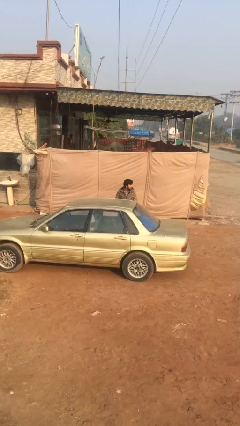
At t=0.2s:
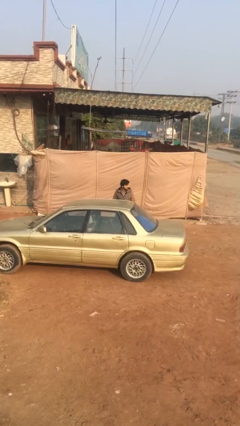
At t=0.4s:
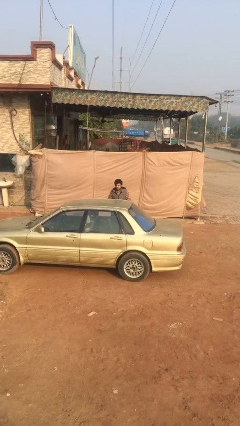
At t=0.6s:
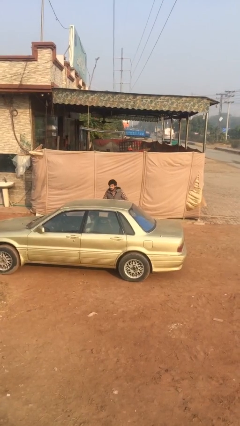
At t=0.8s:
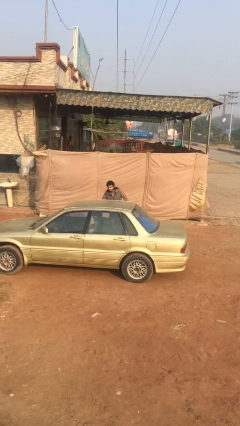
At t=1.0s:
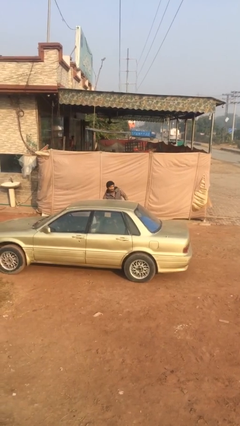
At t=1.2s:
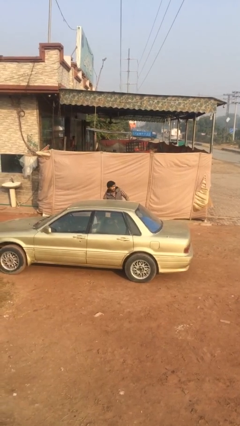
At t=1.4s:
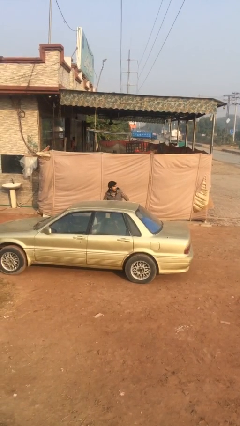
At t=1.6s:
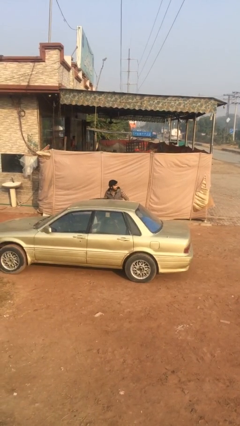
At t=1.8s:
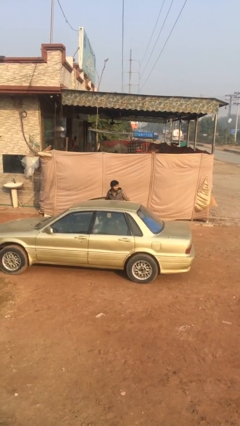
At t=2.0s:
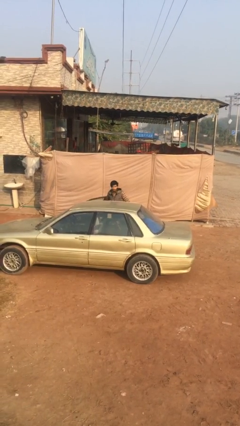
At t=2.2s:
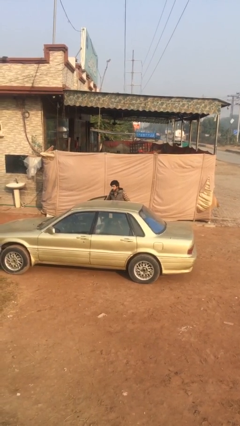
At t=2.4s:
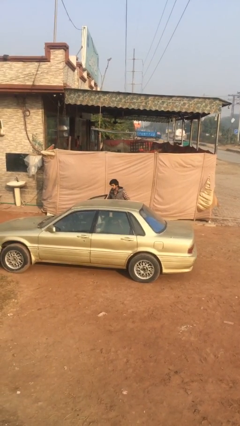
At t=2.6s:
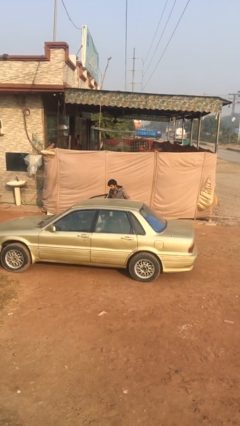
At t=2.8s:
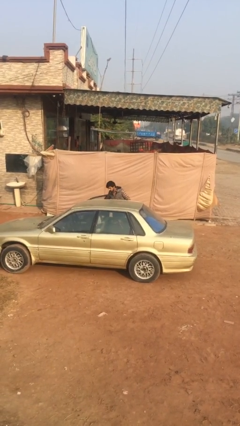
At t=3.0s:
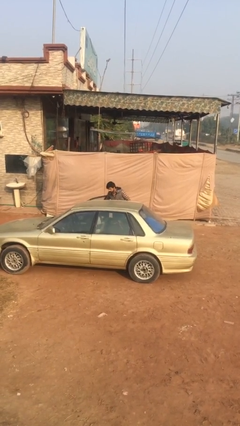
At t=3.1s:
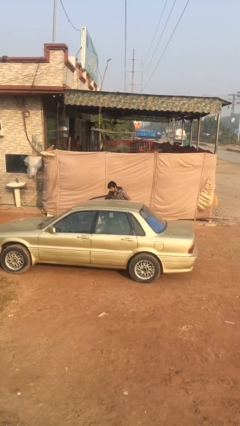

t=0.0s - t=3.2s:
person opens car door

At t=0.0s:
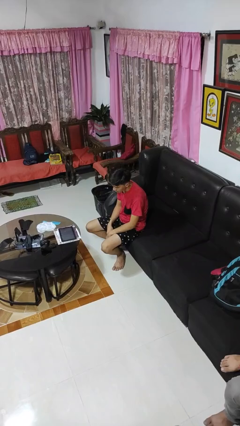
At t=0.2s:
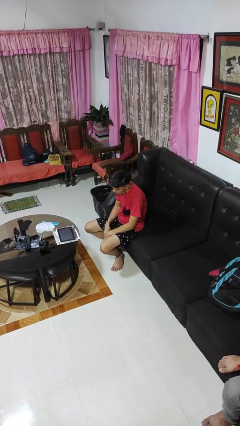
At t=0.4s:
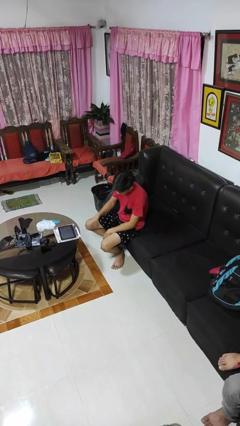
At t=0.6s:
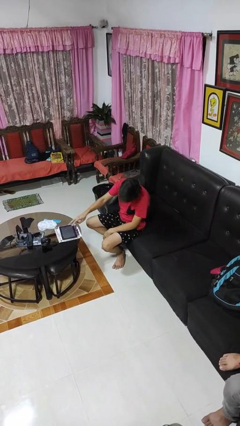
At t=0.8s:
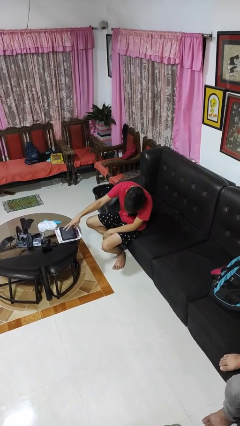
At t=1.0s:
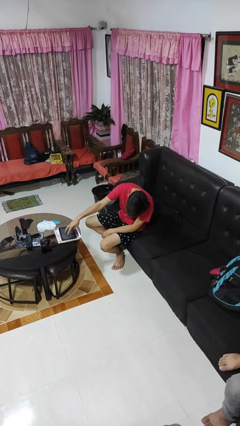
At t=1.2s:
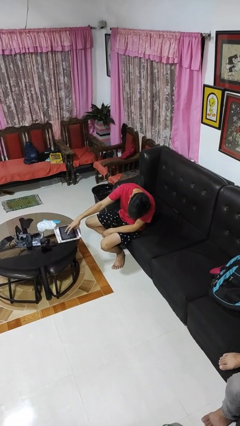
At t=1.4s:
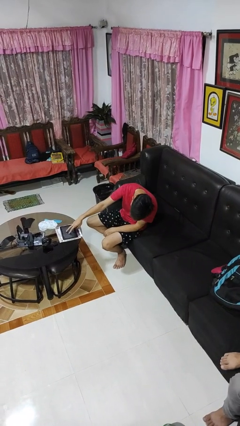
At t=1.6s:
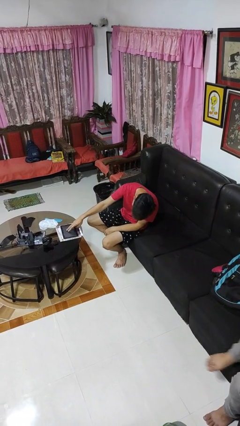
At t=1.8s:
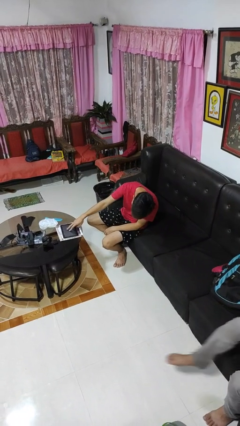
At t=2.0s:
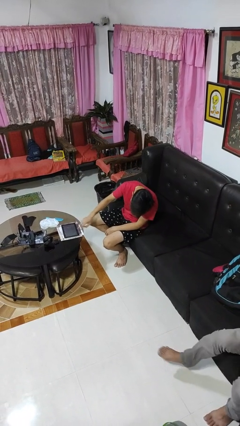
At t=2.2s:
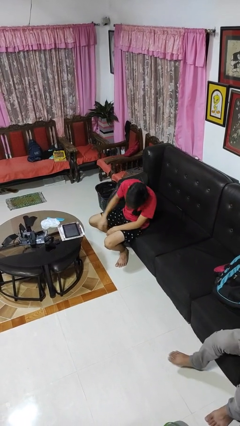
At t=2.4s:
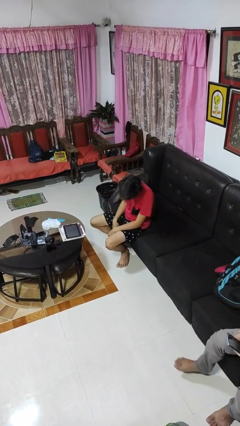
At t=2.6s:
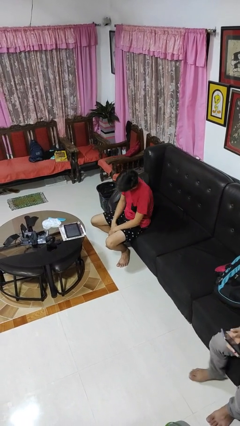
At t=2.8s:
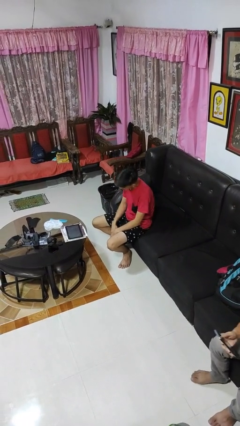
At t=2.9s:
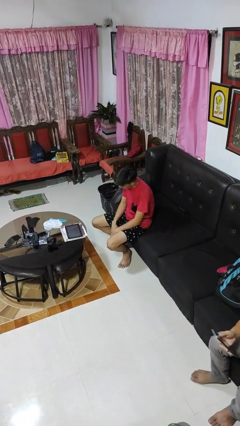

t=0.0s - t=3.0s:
person taps object with finger

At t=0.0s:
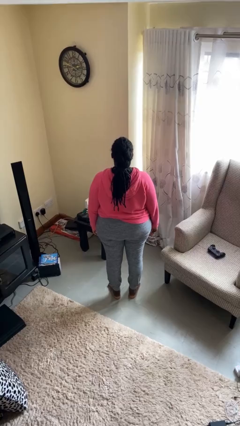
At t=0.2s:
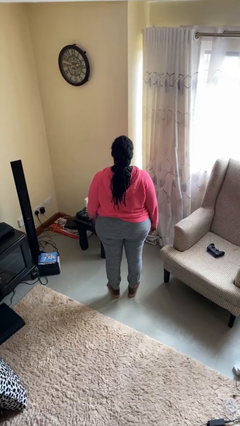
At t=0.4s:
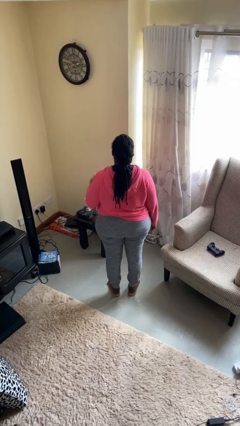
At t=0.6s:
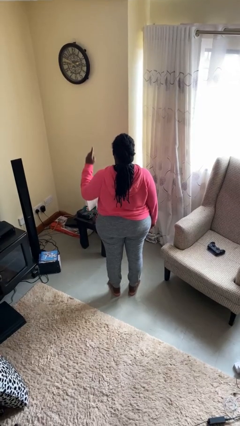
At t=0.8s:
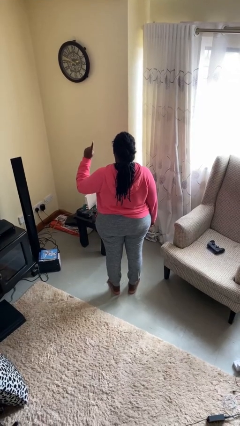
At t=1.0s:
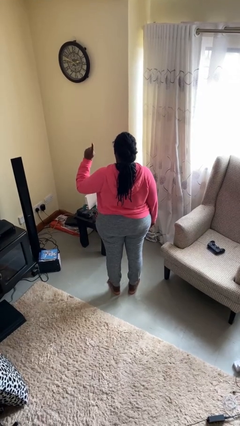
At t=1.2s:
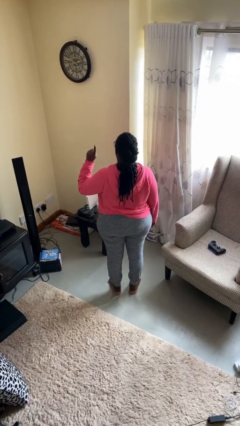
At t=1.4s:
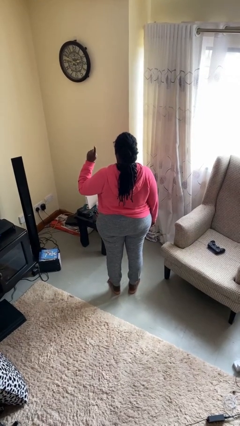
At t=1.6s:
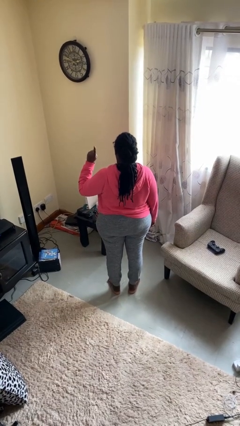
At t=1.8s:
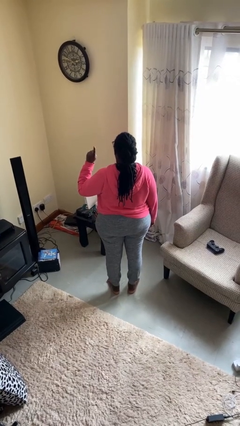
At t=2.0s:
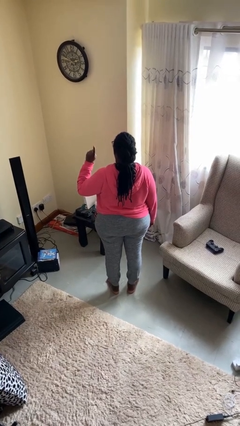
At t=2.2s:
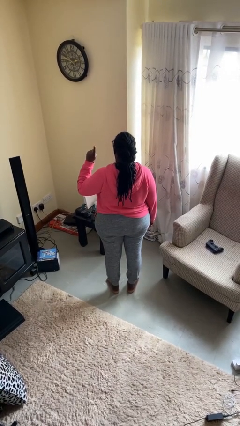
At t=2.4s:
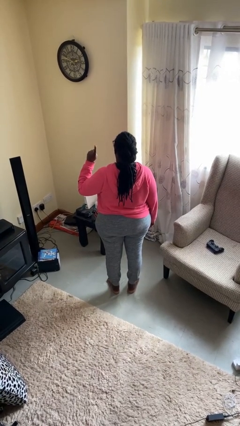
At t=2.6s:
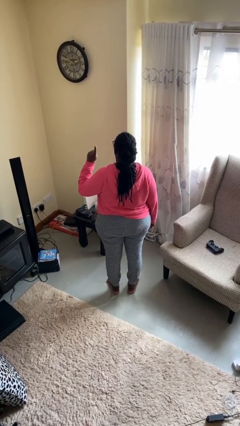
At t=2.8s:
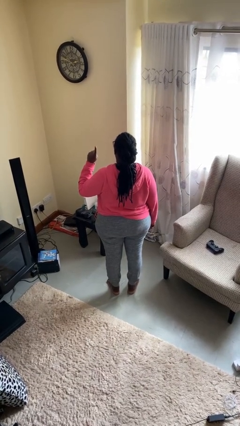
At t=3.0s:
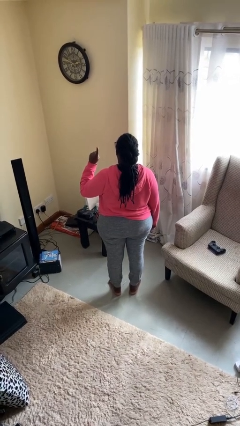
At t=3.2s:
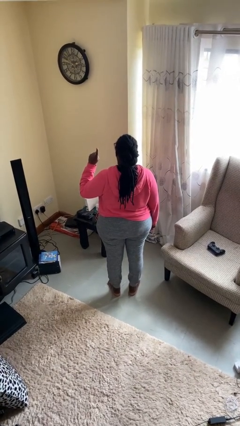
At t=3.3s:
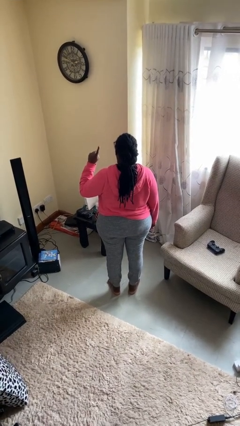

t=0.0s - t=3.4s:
person gestures number one

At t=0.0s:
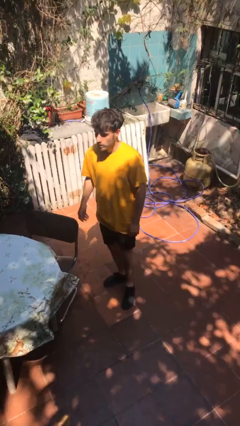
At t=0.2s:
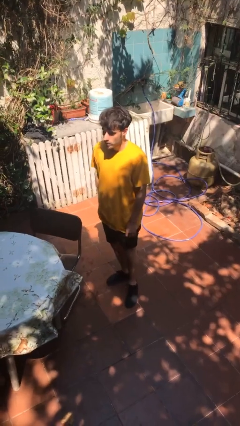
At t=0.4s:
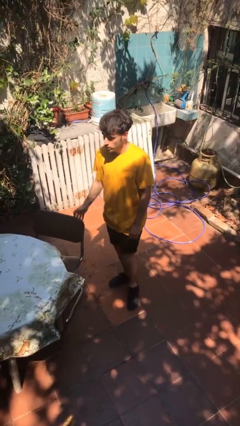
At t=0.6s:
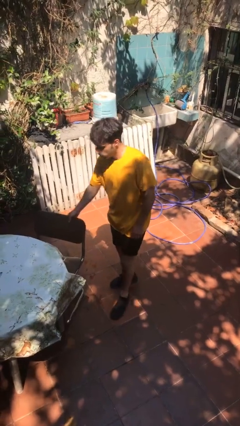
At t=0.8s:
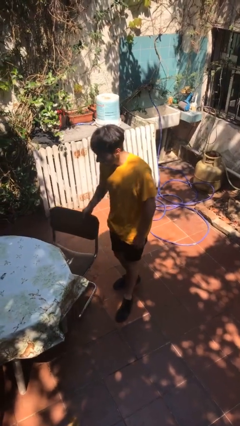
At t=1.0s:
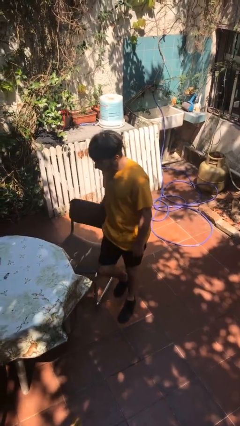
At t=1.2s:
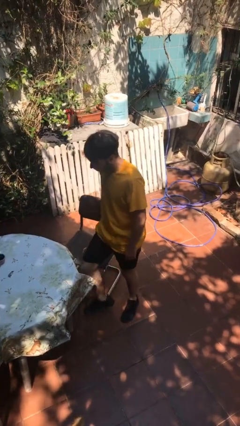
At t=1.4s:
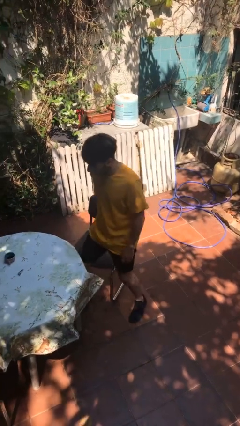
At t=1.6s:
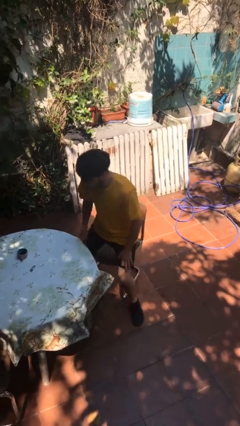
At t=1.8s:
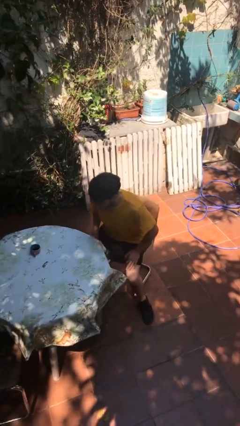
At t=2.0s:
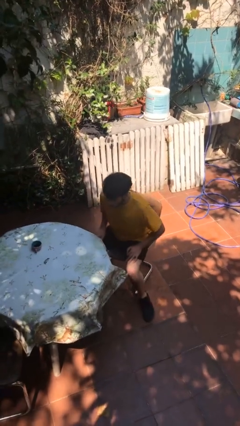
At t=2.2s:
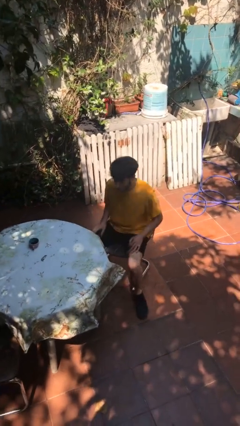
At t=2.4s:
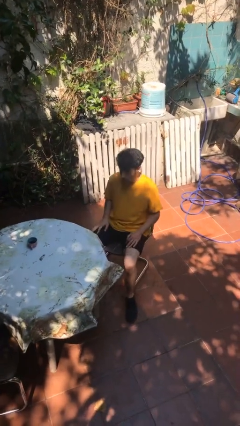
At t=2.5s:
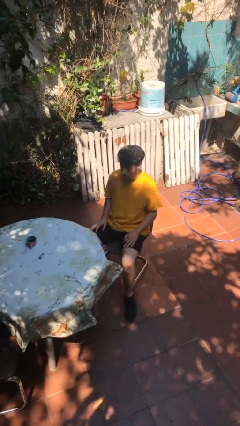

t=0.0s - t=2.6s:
person sits down

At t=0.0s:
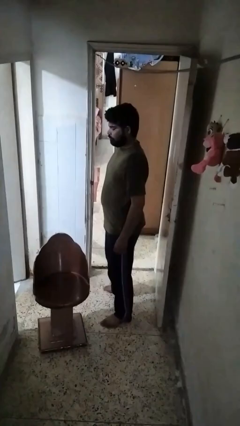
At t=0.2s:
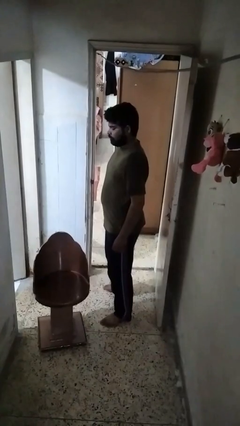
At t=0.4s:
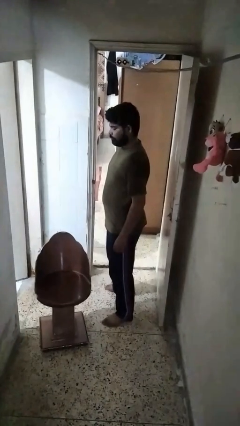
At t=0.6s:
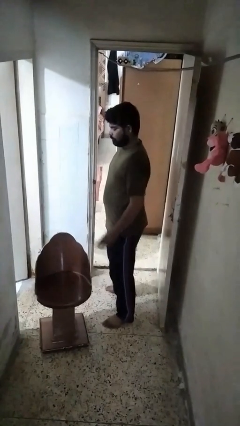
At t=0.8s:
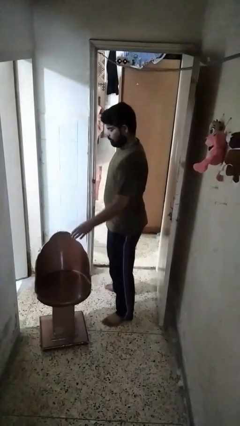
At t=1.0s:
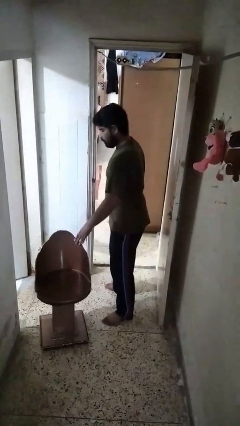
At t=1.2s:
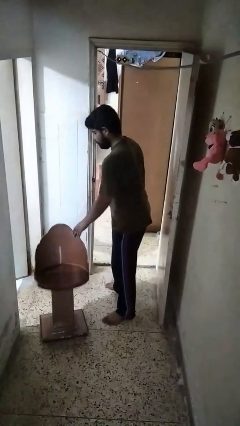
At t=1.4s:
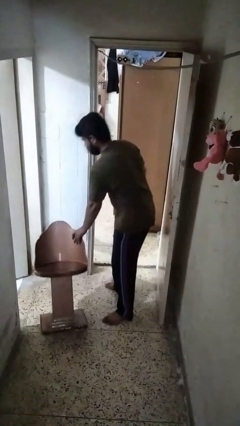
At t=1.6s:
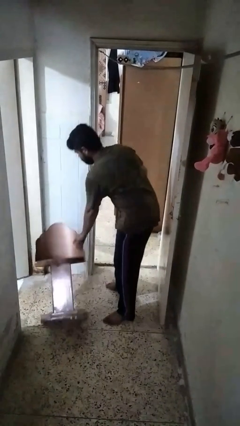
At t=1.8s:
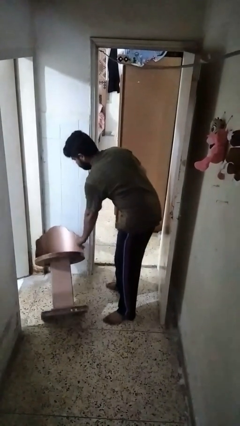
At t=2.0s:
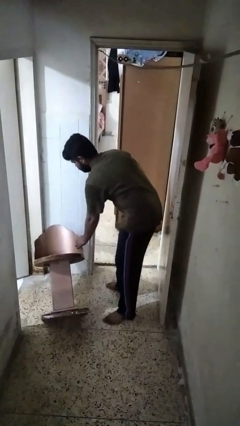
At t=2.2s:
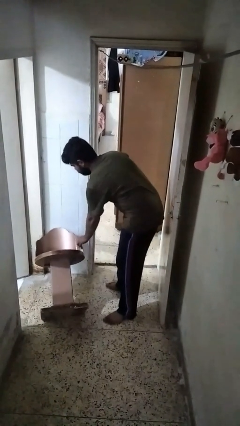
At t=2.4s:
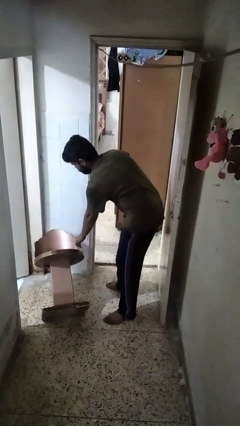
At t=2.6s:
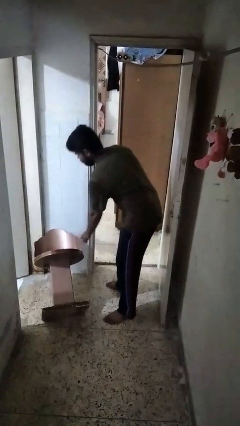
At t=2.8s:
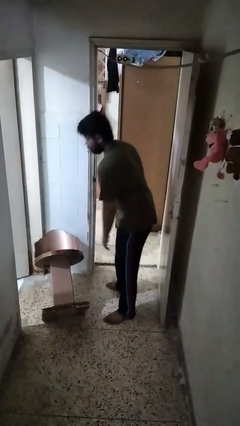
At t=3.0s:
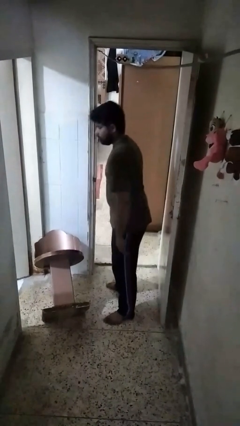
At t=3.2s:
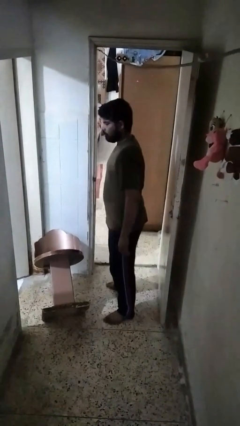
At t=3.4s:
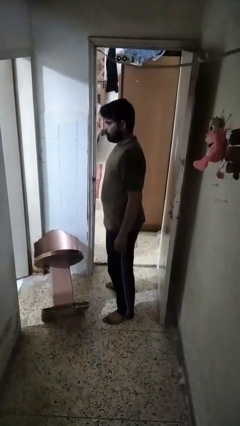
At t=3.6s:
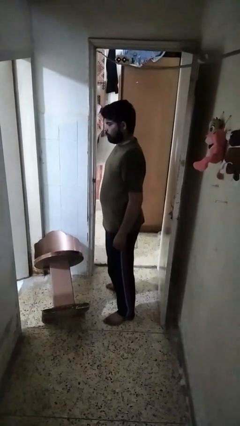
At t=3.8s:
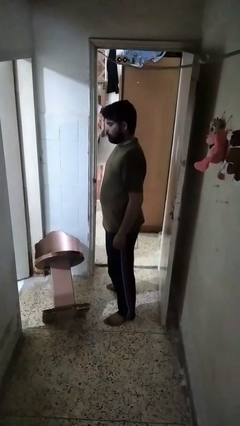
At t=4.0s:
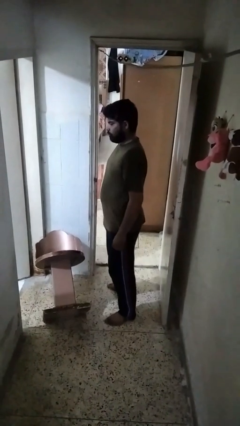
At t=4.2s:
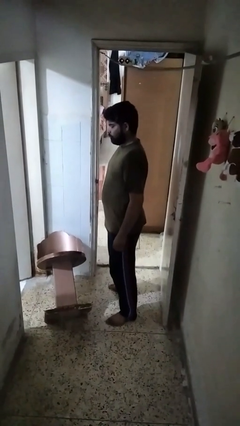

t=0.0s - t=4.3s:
person knocks over furniture

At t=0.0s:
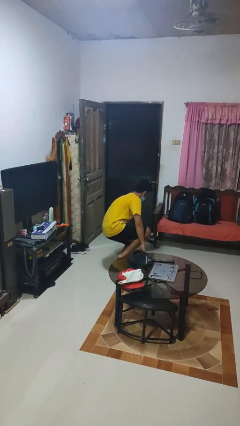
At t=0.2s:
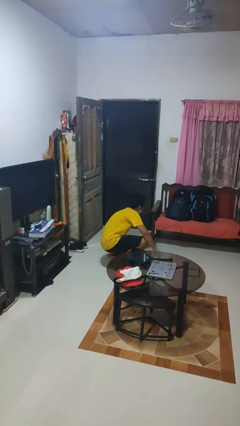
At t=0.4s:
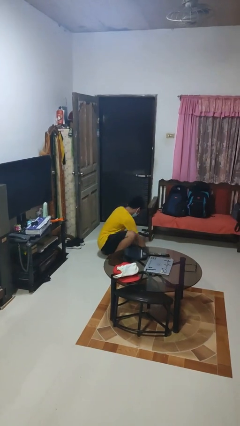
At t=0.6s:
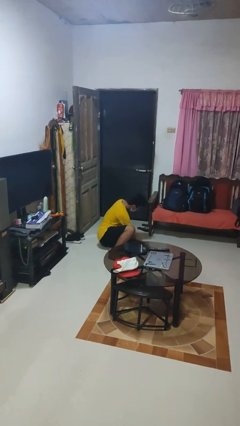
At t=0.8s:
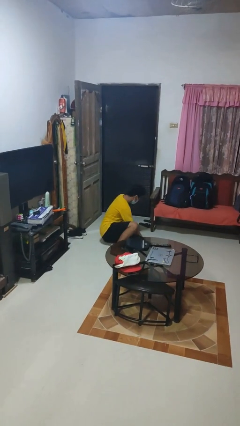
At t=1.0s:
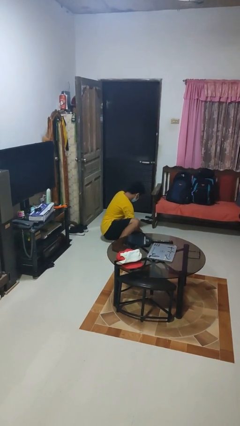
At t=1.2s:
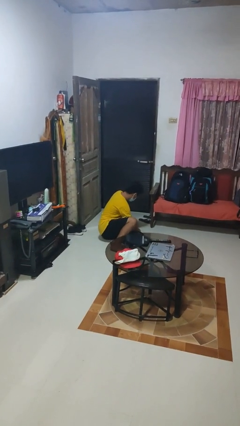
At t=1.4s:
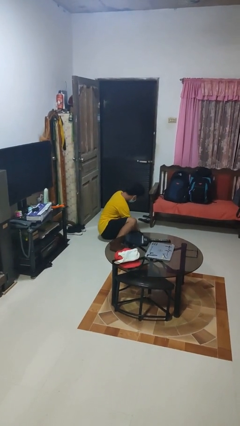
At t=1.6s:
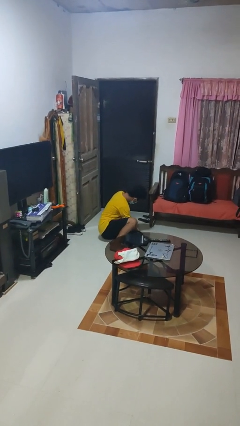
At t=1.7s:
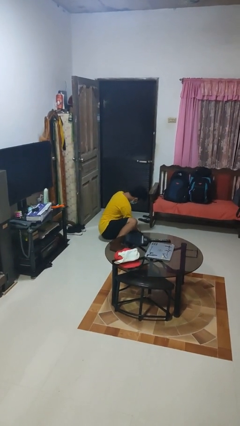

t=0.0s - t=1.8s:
person lies down on floor
